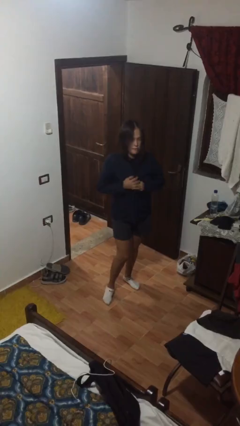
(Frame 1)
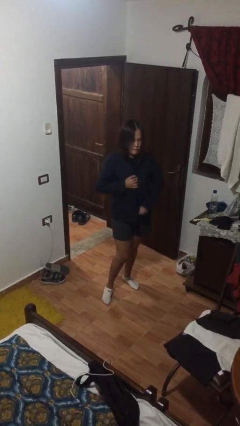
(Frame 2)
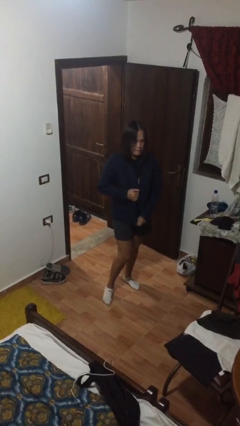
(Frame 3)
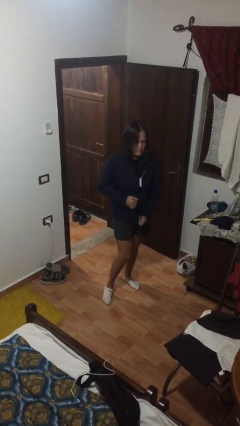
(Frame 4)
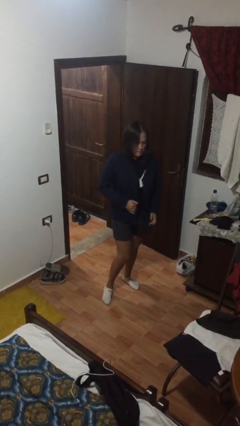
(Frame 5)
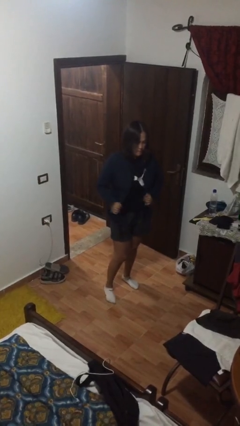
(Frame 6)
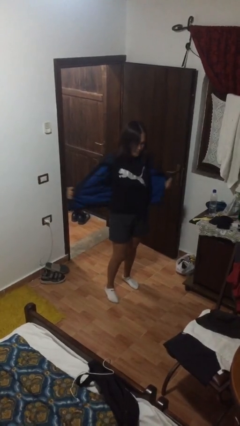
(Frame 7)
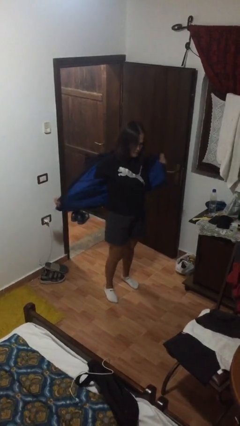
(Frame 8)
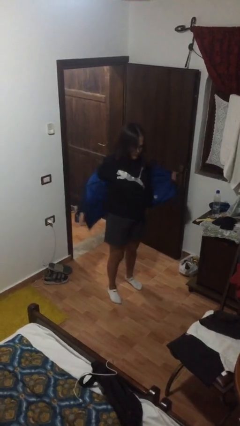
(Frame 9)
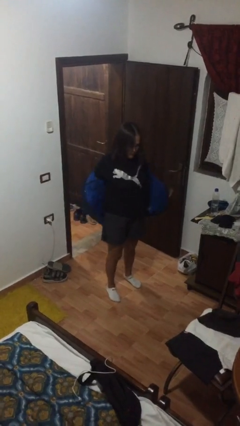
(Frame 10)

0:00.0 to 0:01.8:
person unzips jacket

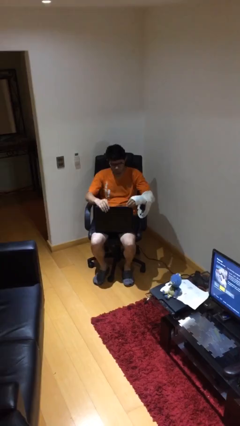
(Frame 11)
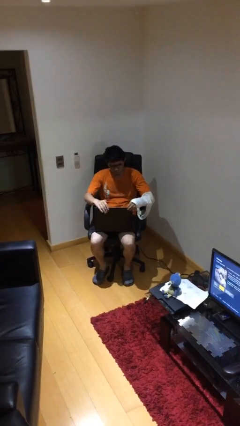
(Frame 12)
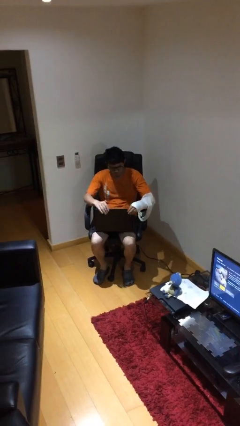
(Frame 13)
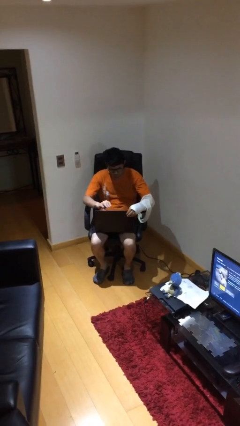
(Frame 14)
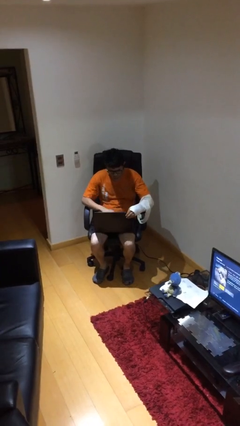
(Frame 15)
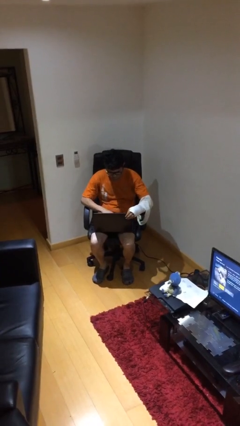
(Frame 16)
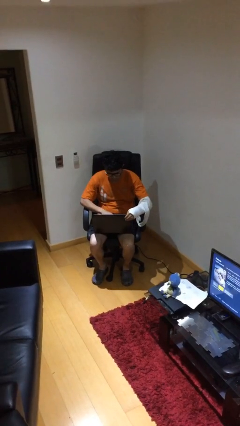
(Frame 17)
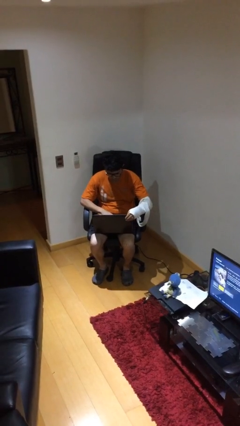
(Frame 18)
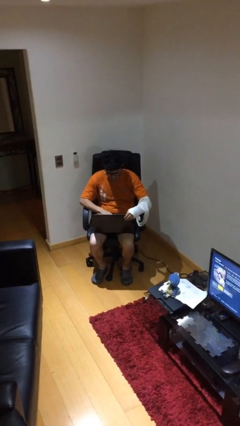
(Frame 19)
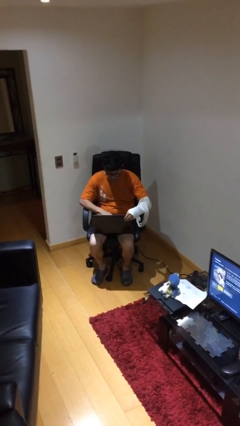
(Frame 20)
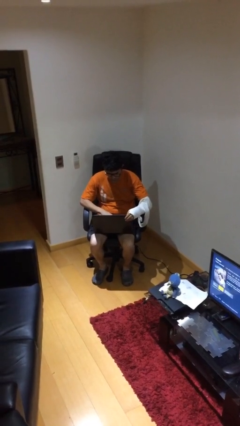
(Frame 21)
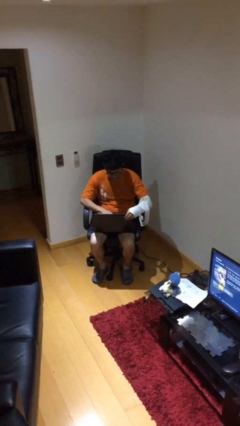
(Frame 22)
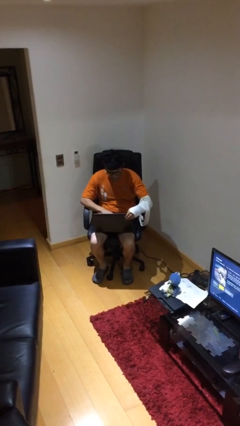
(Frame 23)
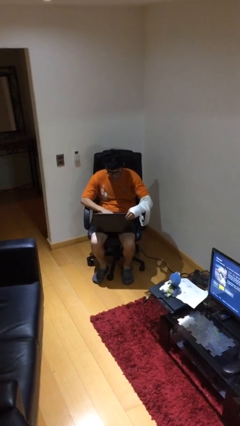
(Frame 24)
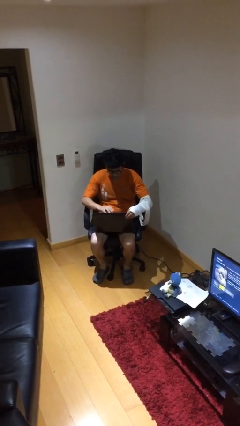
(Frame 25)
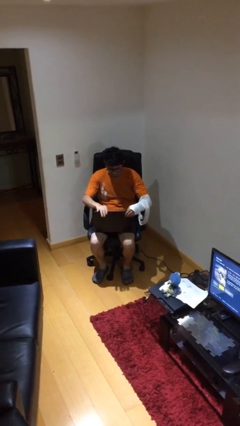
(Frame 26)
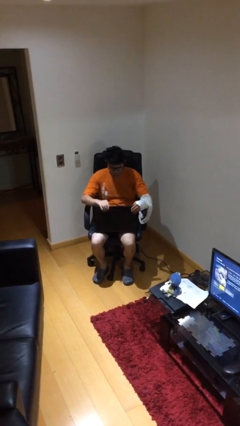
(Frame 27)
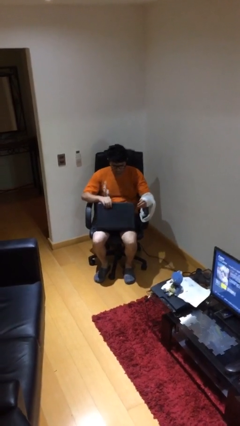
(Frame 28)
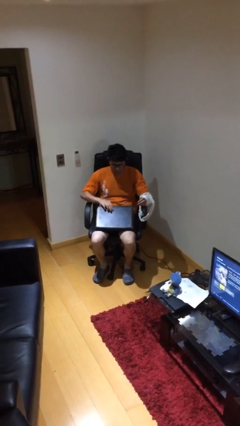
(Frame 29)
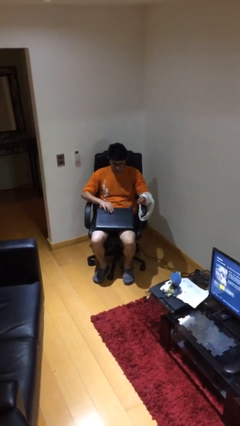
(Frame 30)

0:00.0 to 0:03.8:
person interacts with laptop

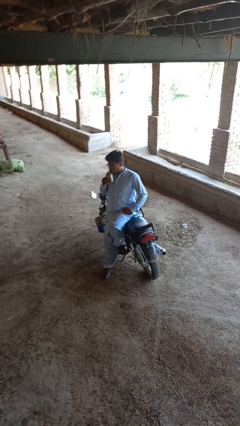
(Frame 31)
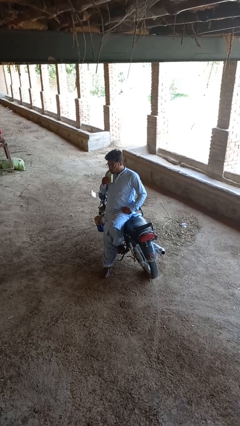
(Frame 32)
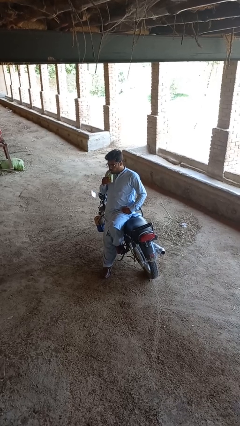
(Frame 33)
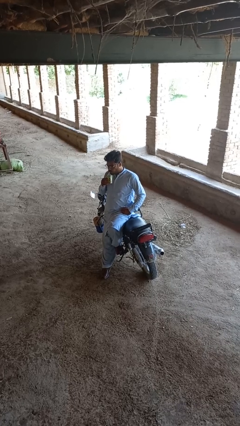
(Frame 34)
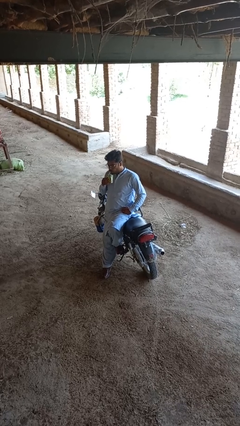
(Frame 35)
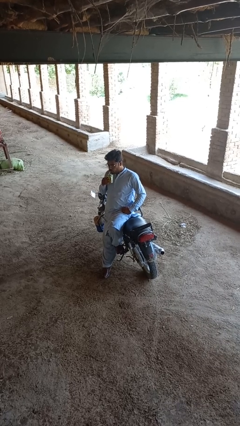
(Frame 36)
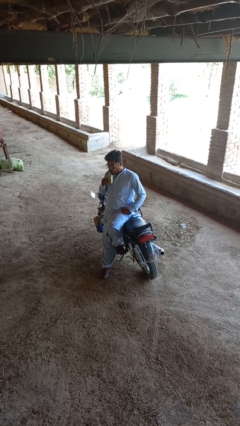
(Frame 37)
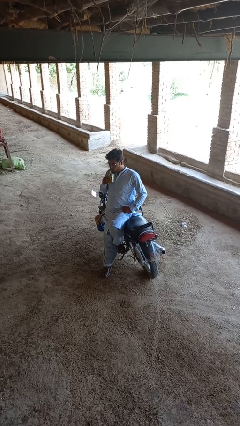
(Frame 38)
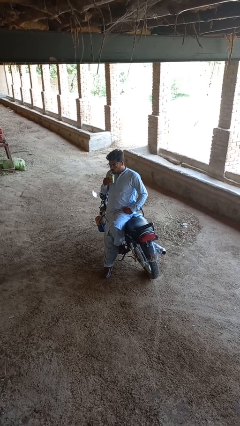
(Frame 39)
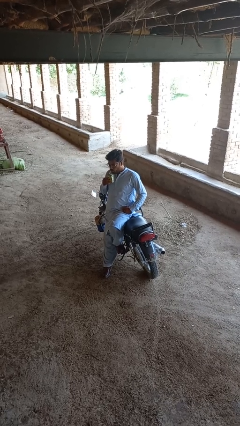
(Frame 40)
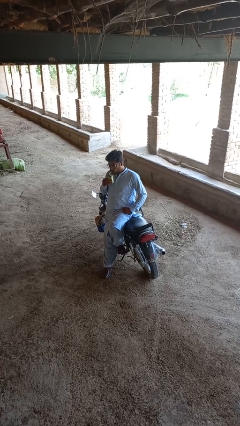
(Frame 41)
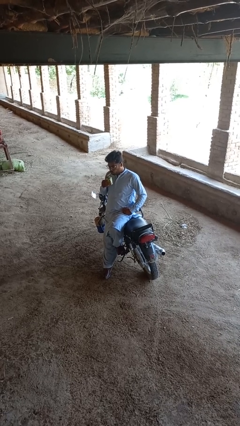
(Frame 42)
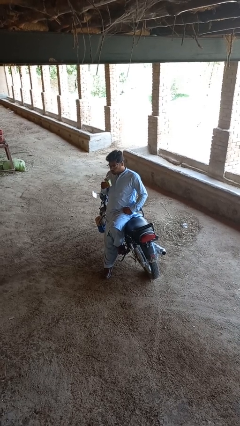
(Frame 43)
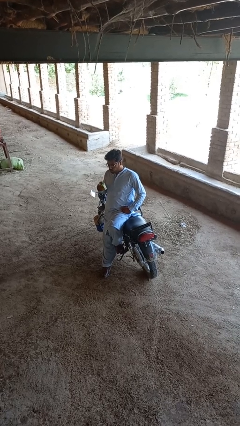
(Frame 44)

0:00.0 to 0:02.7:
person drinks from straw

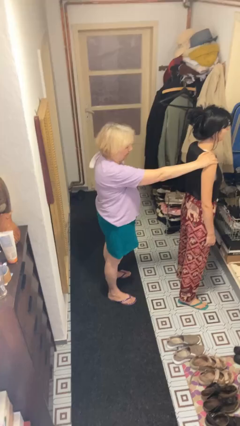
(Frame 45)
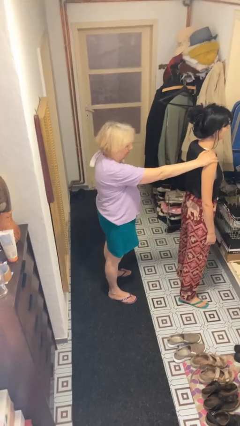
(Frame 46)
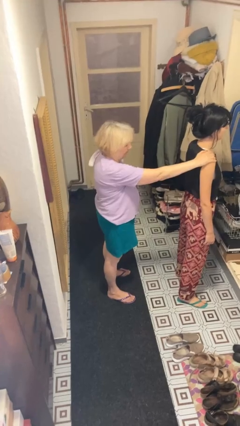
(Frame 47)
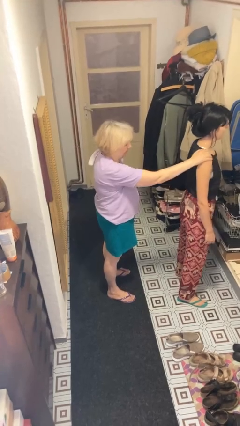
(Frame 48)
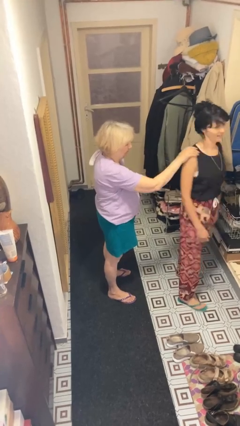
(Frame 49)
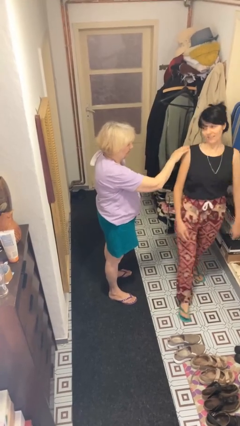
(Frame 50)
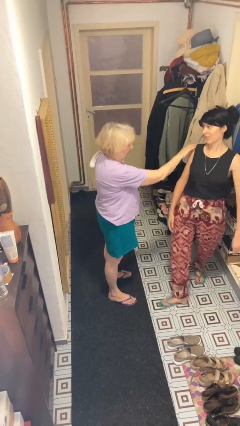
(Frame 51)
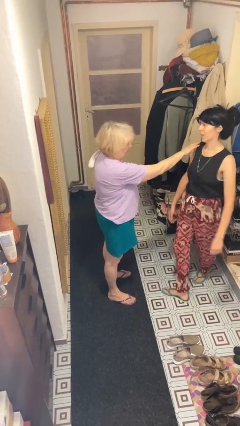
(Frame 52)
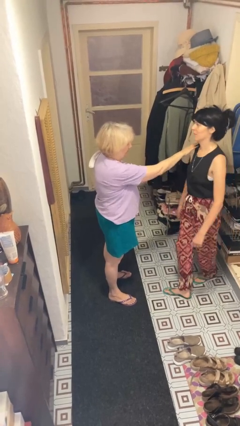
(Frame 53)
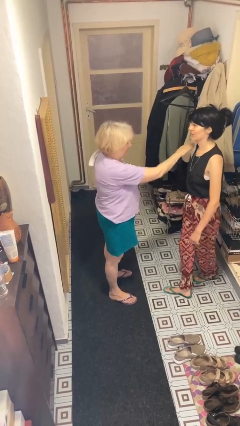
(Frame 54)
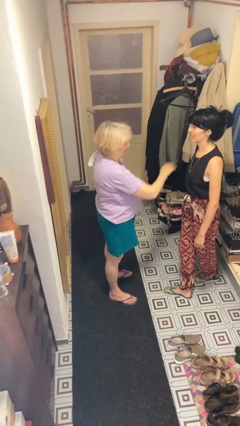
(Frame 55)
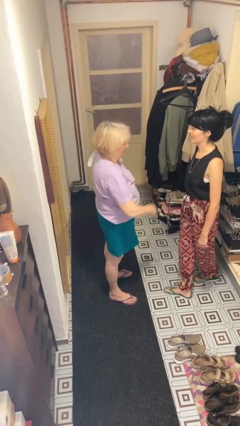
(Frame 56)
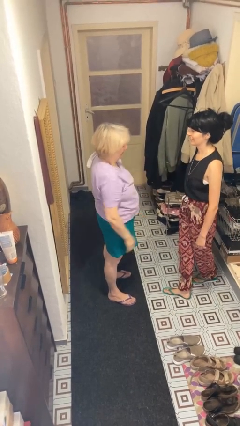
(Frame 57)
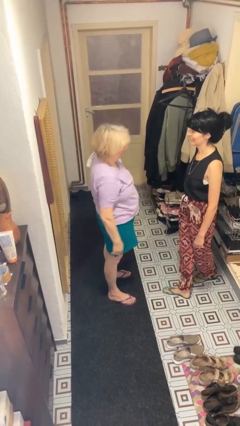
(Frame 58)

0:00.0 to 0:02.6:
person spins person around

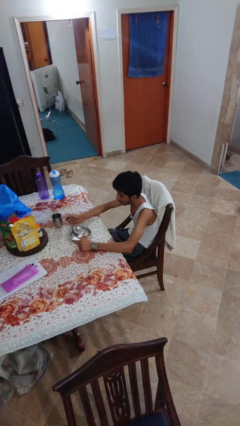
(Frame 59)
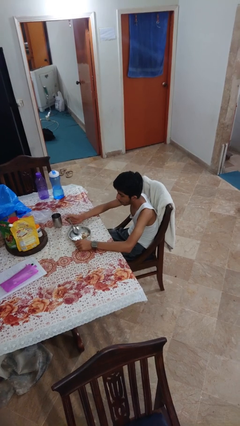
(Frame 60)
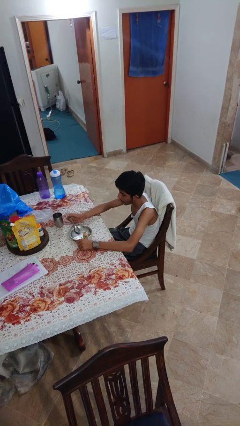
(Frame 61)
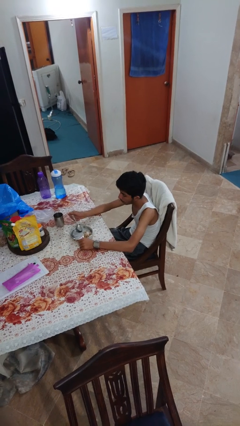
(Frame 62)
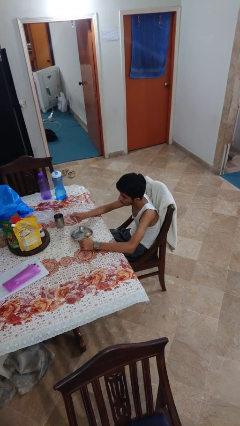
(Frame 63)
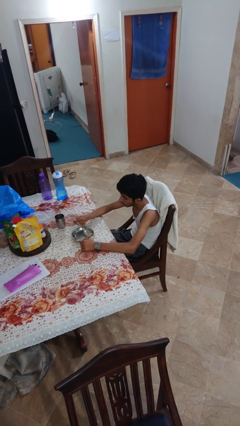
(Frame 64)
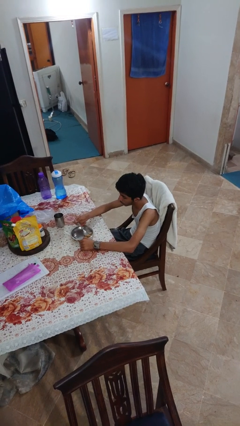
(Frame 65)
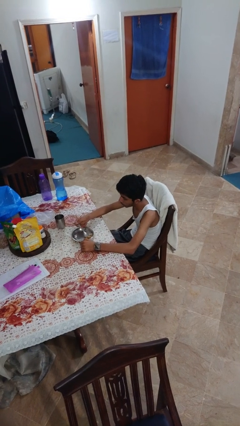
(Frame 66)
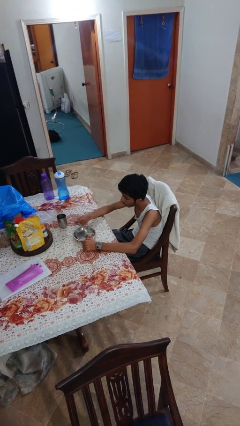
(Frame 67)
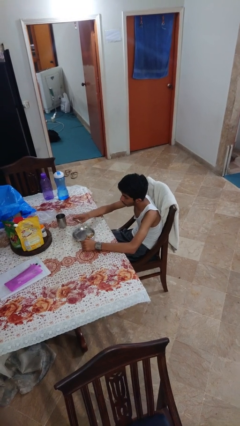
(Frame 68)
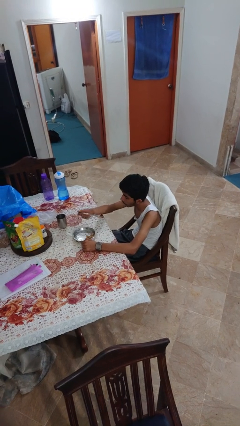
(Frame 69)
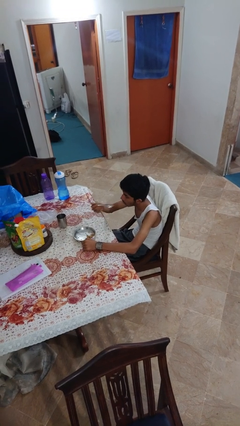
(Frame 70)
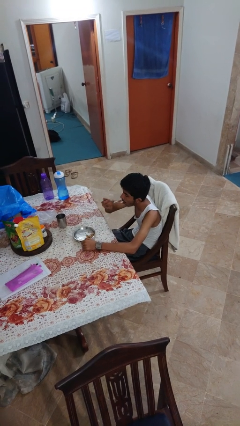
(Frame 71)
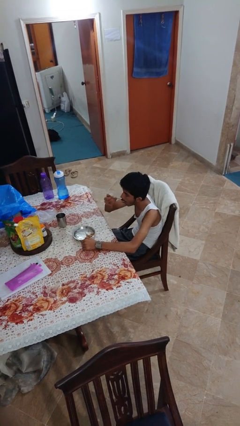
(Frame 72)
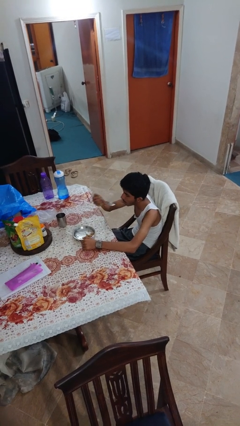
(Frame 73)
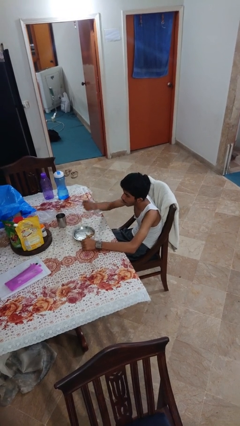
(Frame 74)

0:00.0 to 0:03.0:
person eats with utensil

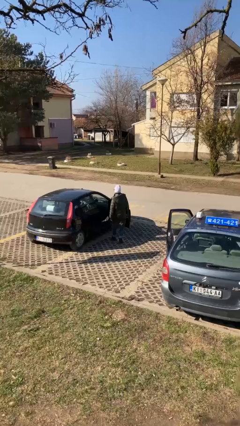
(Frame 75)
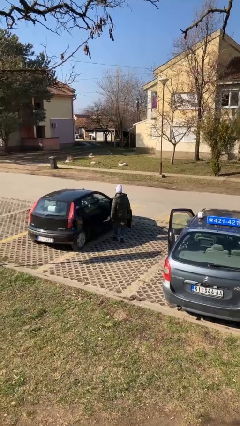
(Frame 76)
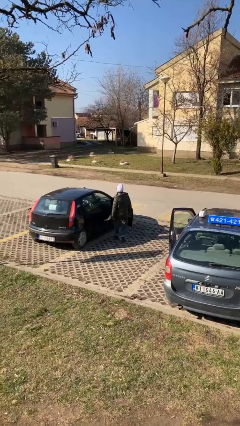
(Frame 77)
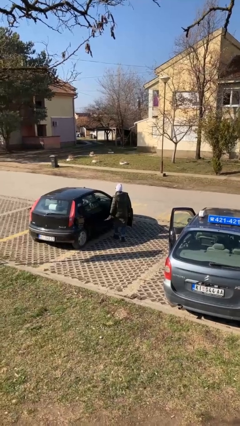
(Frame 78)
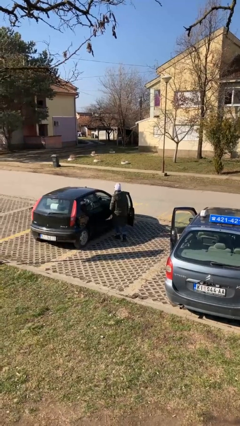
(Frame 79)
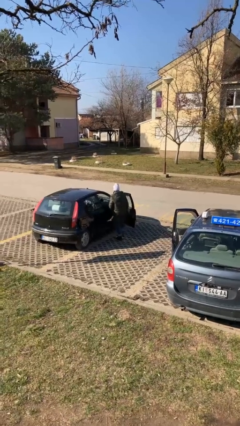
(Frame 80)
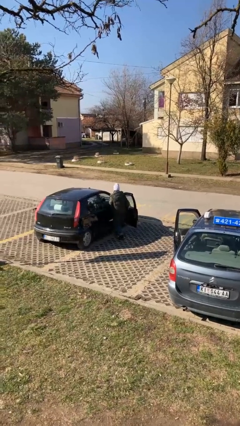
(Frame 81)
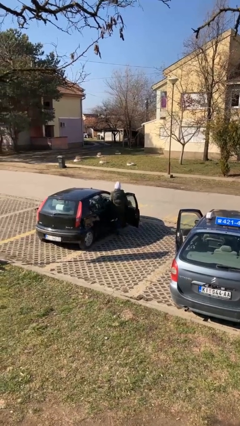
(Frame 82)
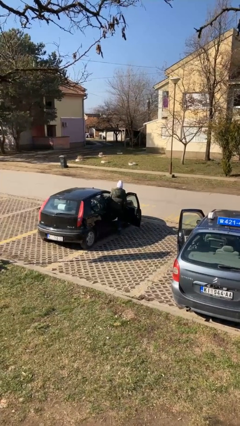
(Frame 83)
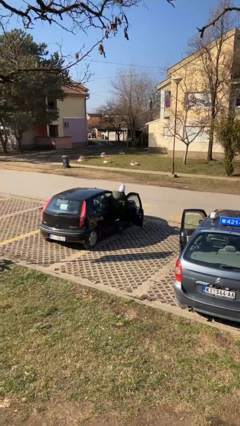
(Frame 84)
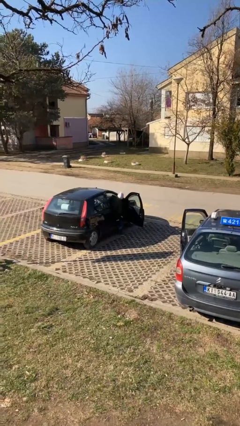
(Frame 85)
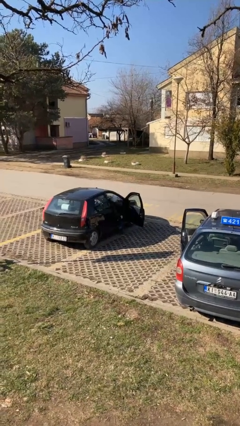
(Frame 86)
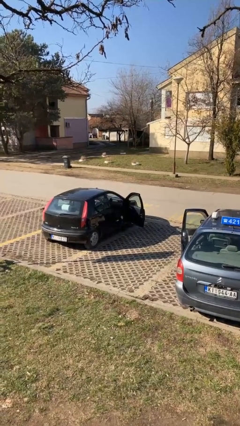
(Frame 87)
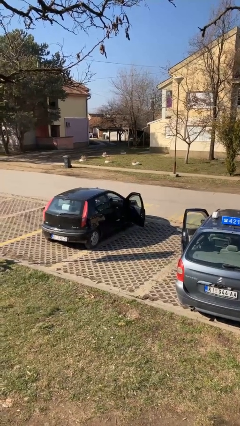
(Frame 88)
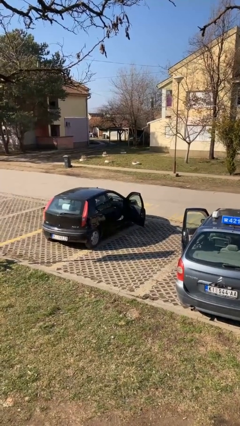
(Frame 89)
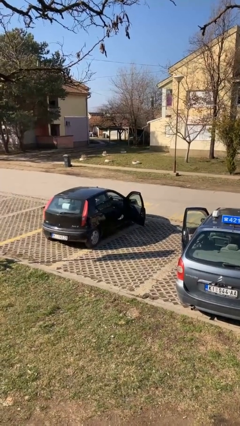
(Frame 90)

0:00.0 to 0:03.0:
person enters car

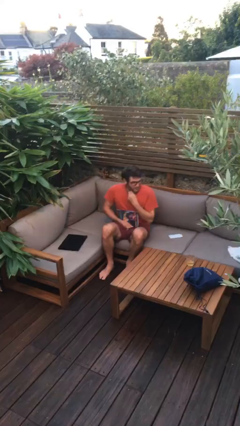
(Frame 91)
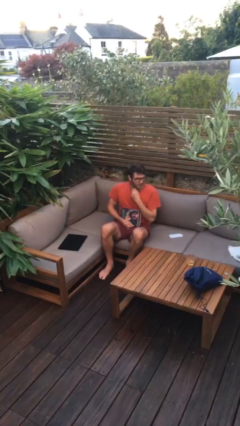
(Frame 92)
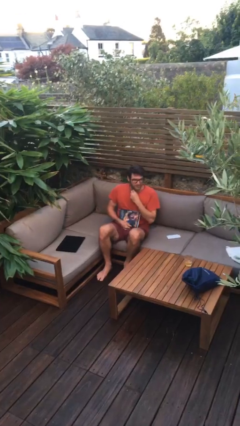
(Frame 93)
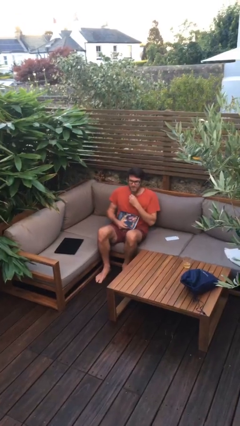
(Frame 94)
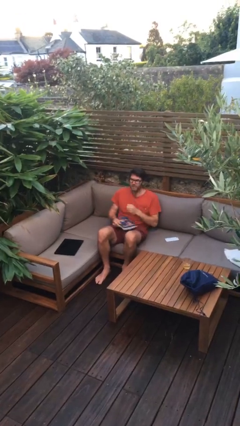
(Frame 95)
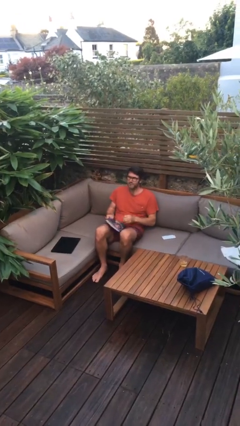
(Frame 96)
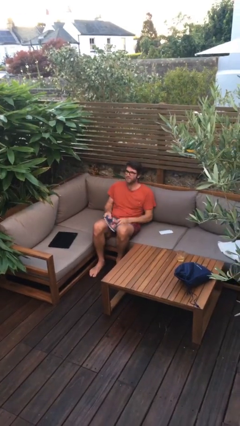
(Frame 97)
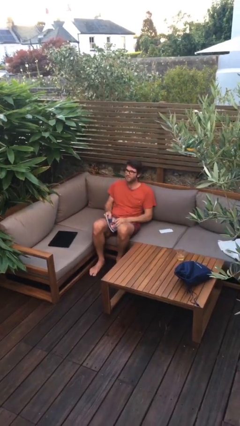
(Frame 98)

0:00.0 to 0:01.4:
person sits down
